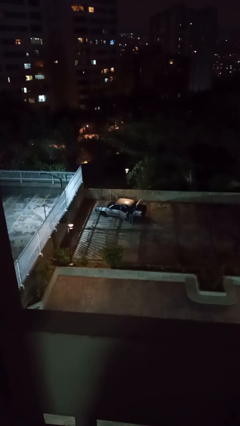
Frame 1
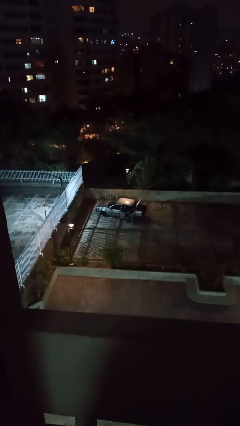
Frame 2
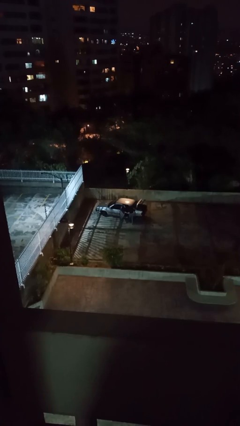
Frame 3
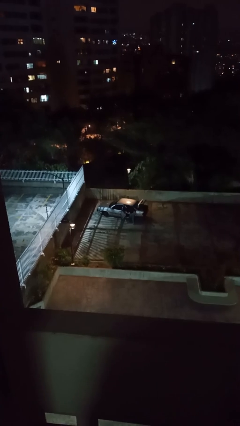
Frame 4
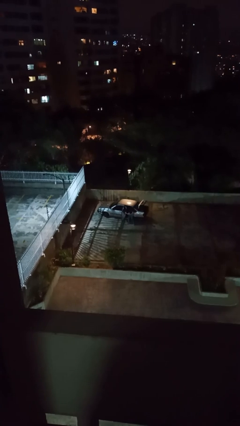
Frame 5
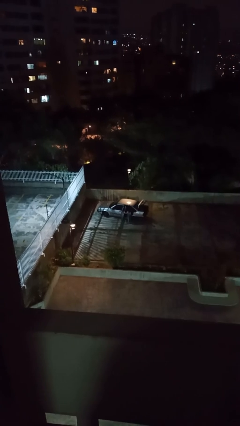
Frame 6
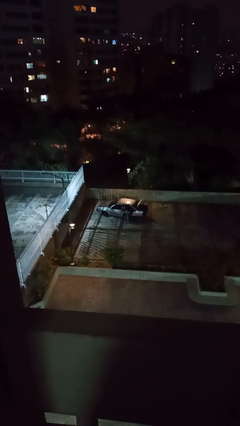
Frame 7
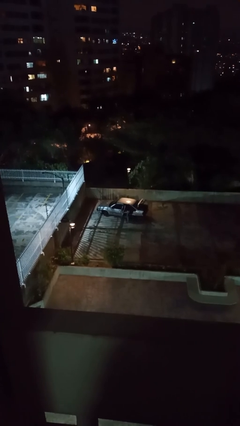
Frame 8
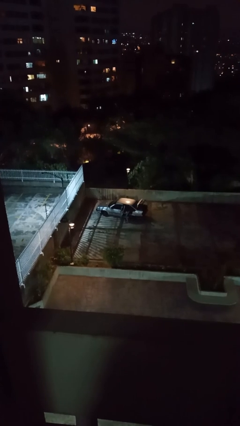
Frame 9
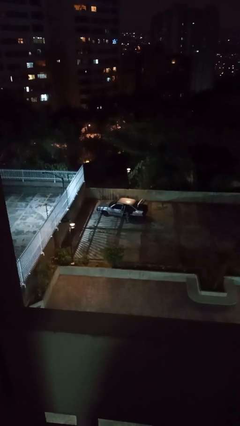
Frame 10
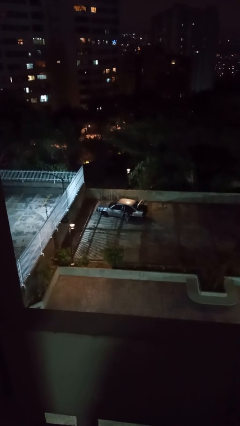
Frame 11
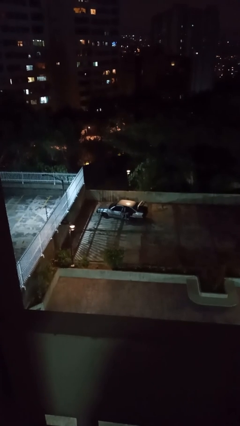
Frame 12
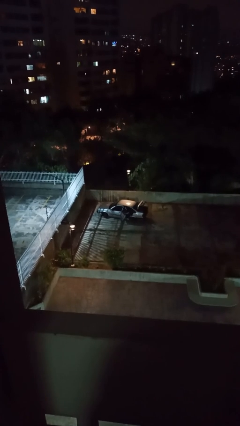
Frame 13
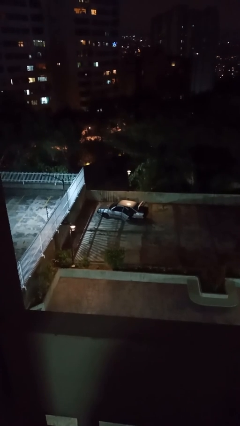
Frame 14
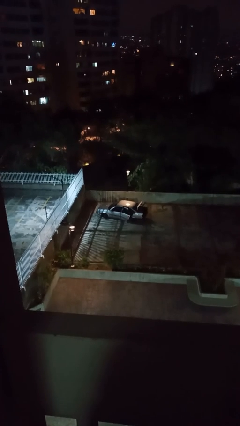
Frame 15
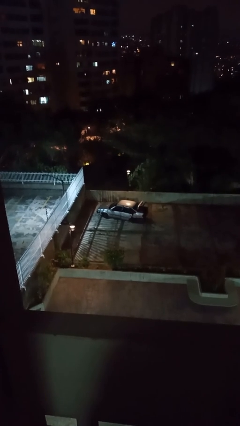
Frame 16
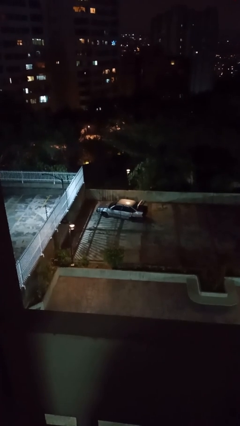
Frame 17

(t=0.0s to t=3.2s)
car picks up person

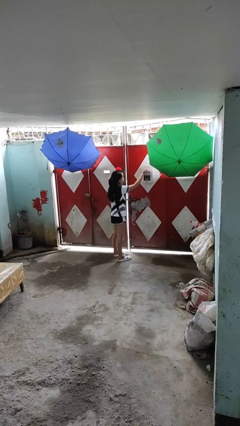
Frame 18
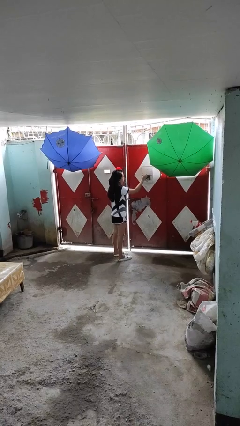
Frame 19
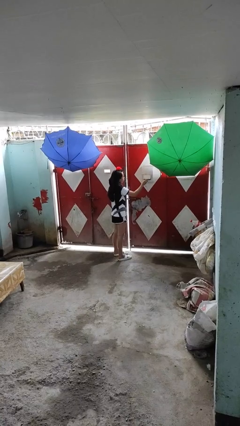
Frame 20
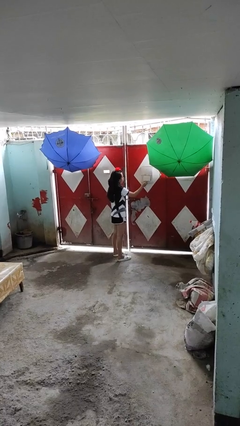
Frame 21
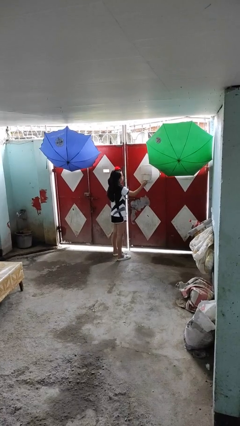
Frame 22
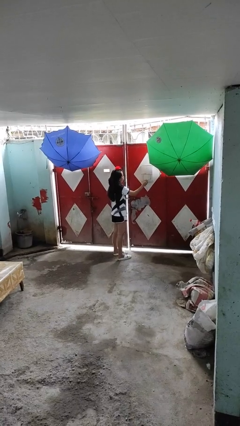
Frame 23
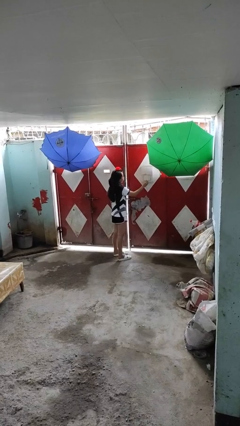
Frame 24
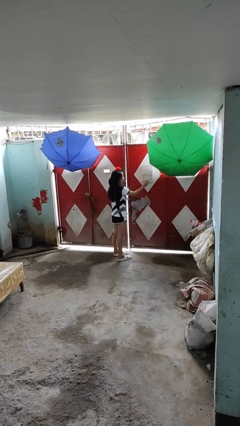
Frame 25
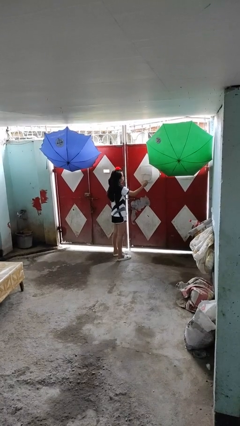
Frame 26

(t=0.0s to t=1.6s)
person closes mailbox

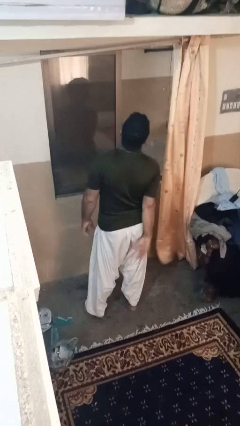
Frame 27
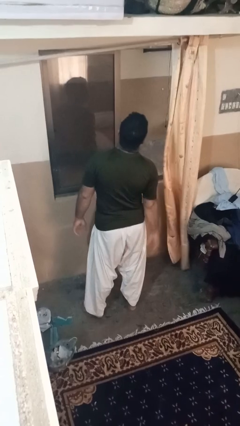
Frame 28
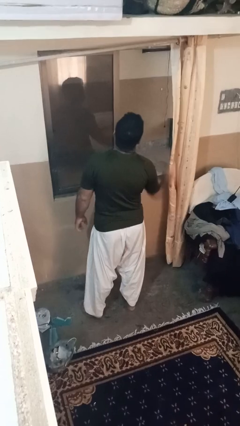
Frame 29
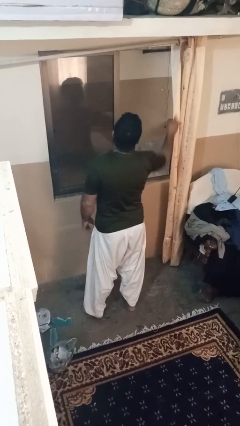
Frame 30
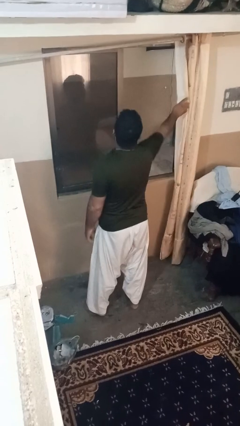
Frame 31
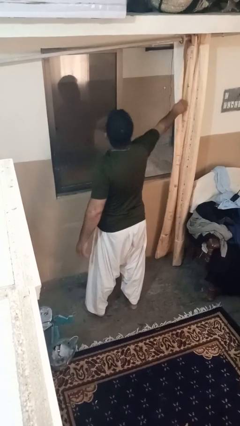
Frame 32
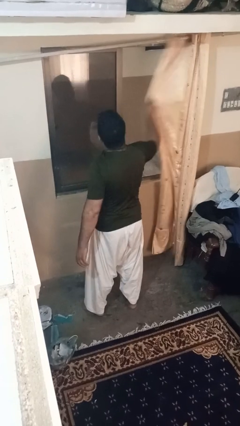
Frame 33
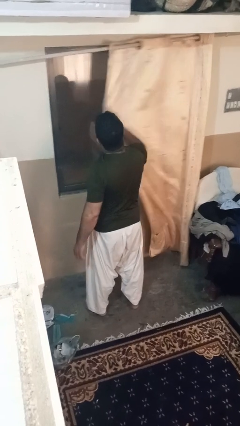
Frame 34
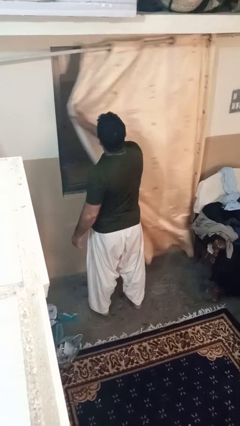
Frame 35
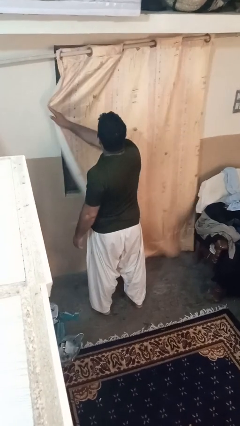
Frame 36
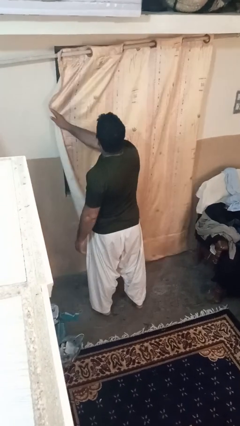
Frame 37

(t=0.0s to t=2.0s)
person closes curtains

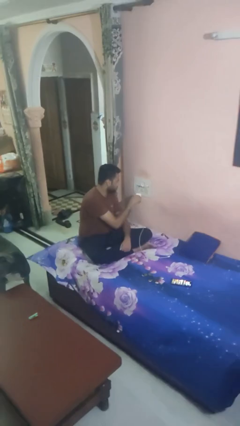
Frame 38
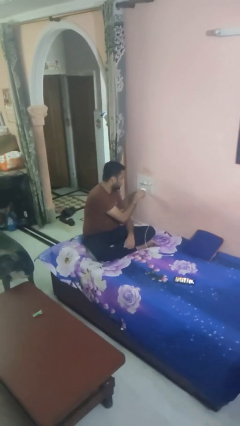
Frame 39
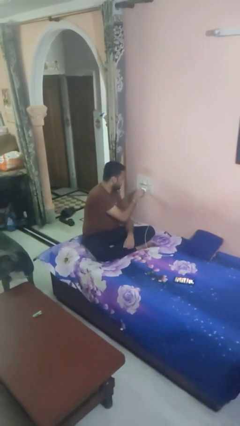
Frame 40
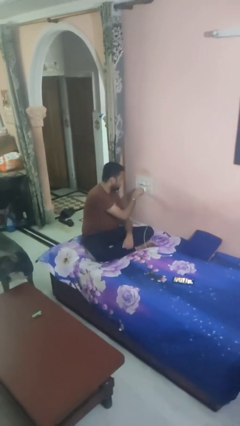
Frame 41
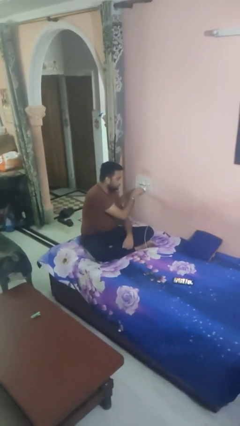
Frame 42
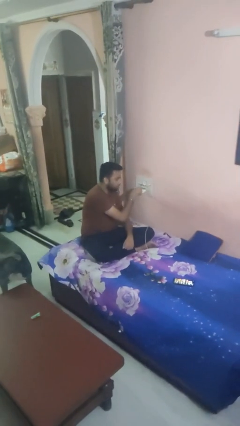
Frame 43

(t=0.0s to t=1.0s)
person plugs into electrical socket

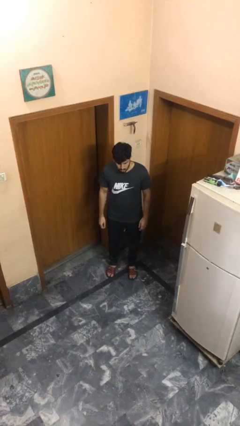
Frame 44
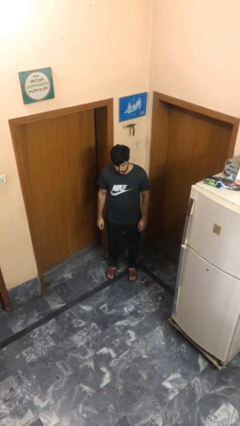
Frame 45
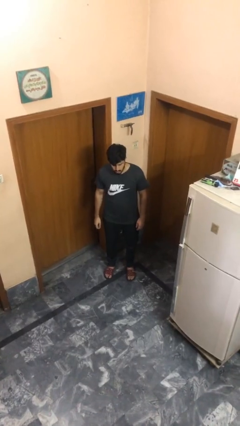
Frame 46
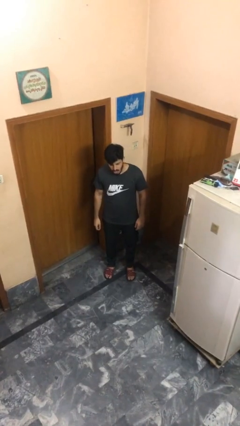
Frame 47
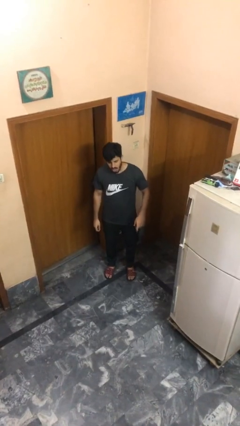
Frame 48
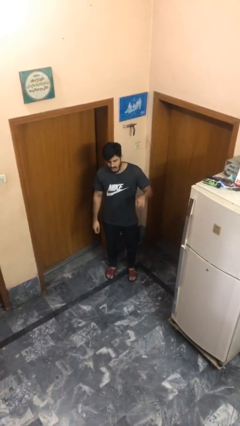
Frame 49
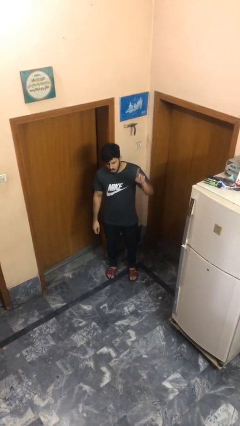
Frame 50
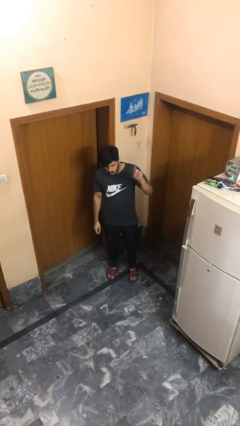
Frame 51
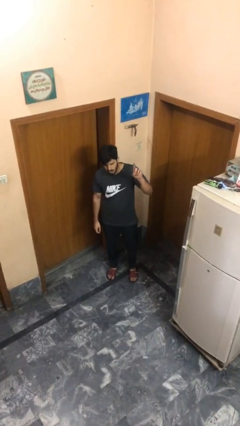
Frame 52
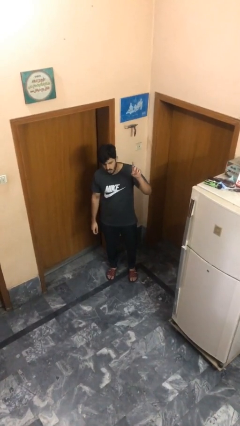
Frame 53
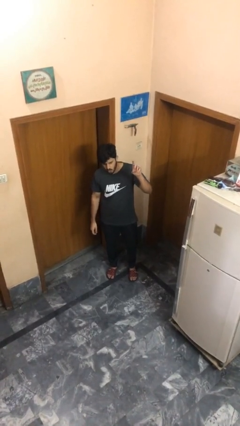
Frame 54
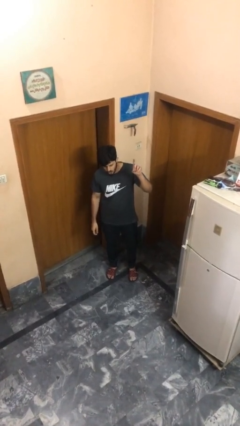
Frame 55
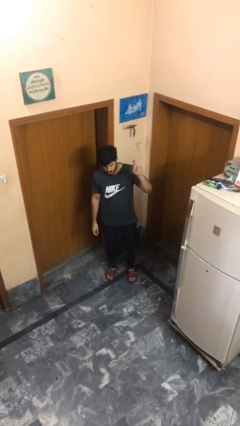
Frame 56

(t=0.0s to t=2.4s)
person gestures raise hand

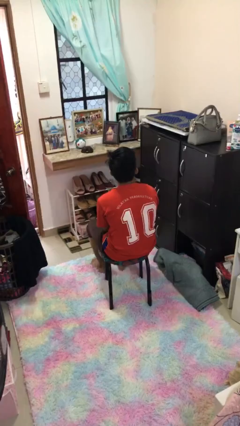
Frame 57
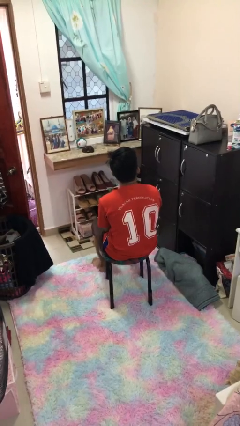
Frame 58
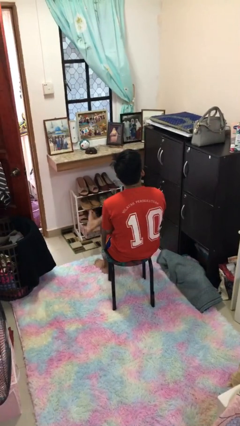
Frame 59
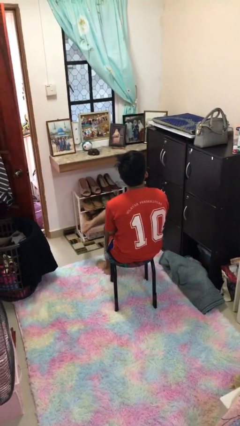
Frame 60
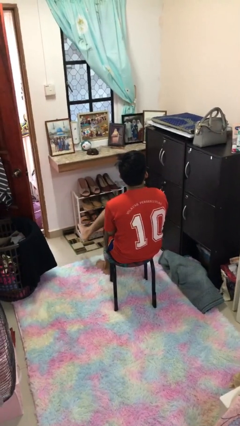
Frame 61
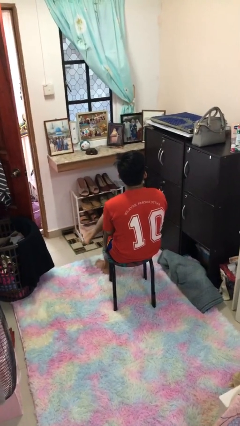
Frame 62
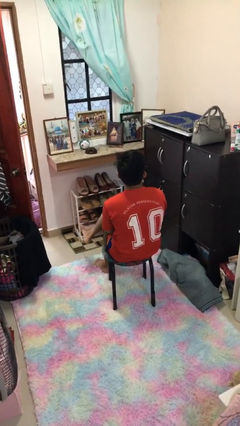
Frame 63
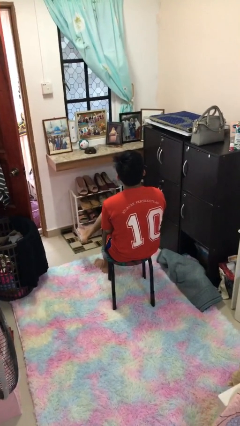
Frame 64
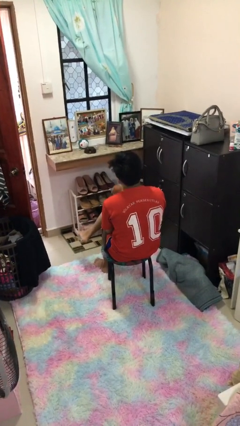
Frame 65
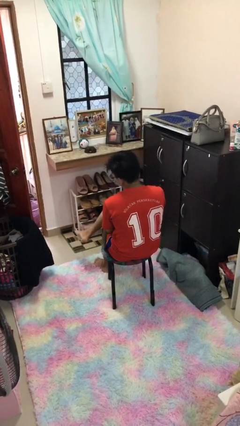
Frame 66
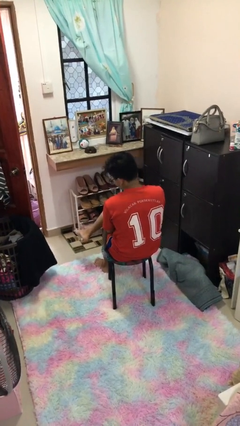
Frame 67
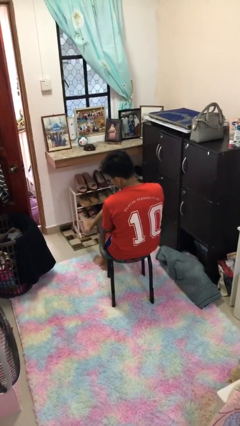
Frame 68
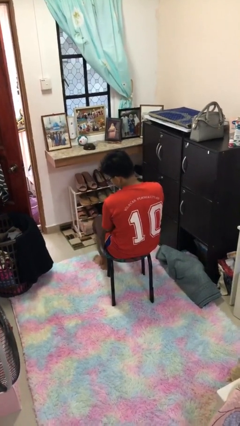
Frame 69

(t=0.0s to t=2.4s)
person crosses legs

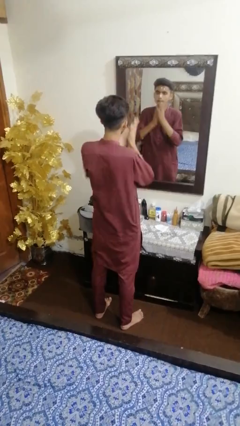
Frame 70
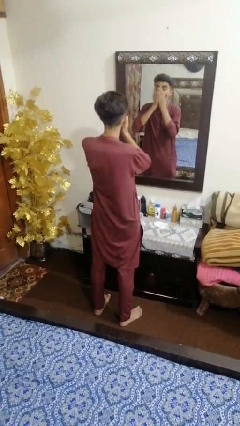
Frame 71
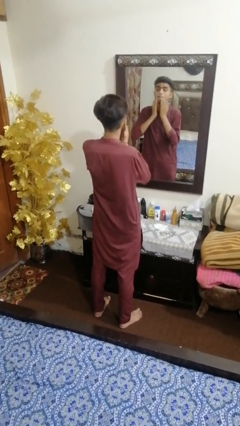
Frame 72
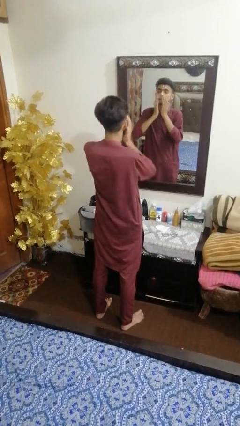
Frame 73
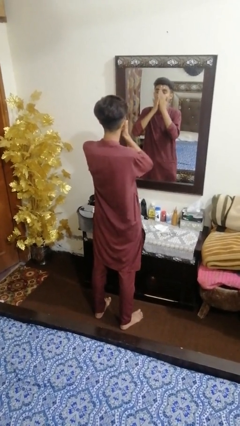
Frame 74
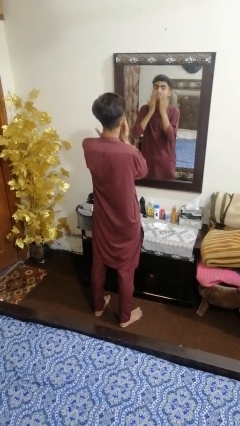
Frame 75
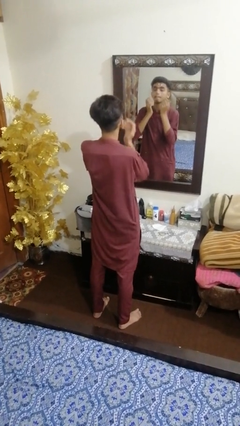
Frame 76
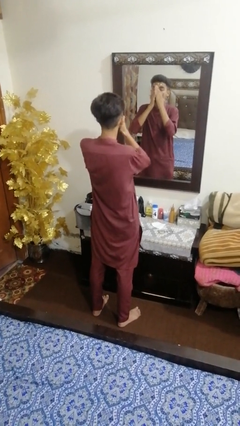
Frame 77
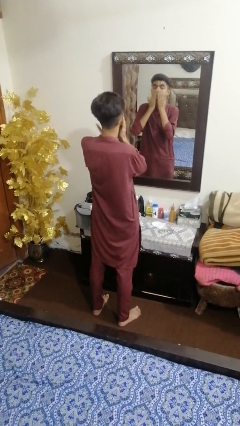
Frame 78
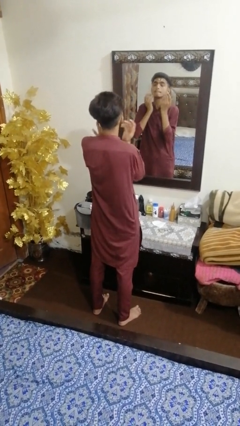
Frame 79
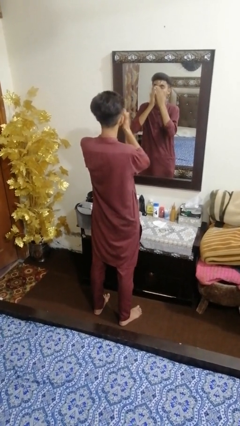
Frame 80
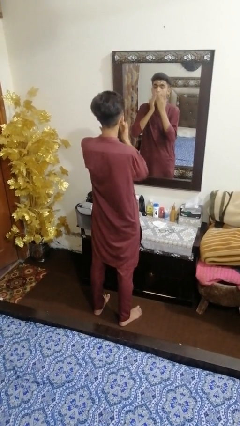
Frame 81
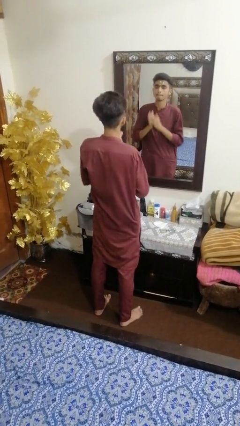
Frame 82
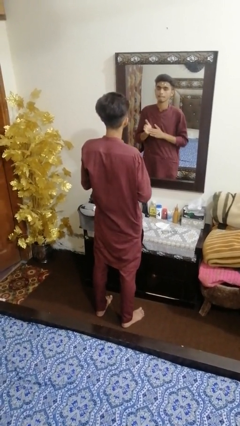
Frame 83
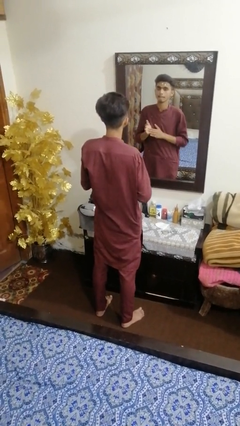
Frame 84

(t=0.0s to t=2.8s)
person applies foundation makeup

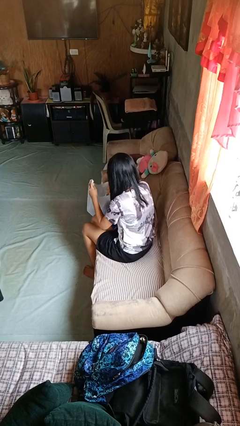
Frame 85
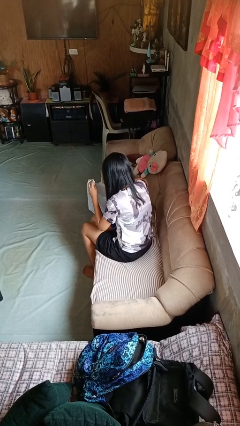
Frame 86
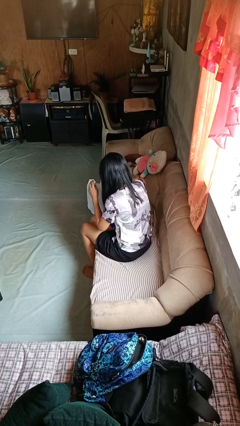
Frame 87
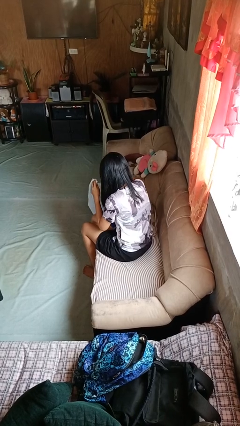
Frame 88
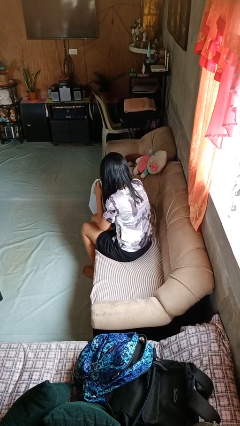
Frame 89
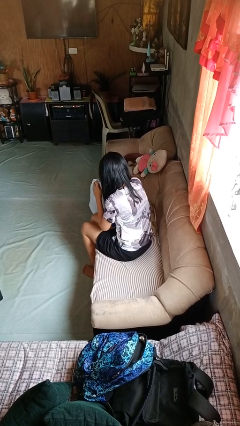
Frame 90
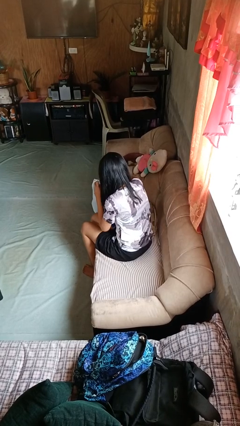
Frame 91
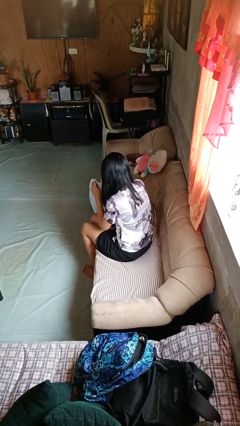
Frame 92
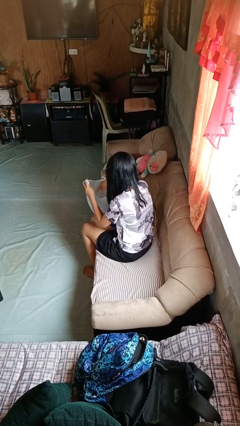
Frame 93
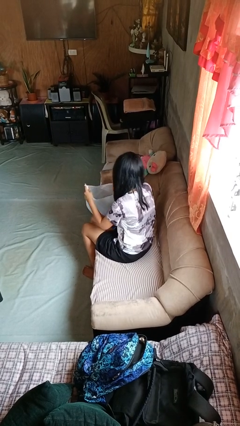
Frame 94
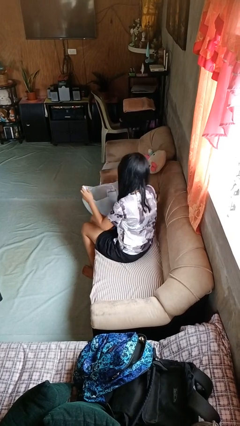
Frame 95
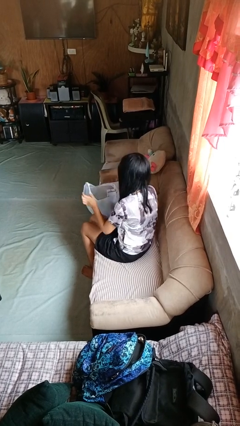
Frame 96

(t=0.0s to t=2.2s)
person searches in bag
